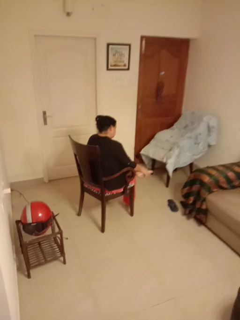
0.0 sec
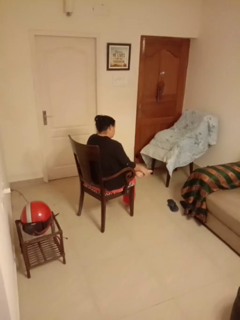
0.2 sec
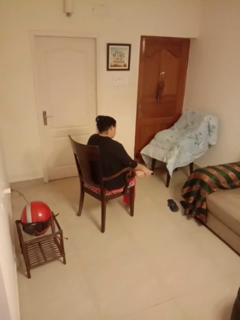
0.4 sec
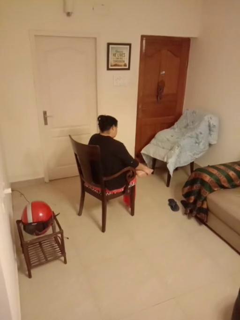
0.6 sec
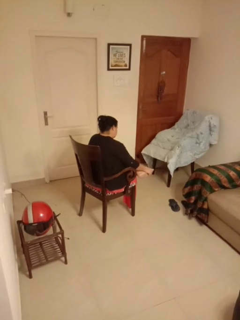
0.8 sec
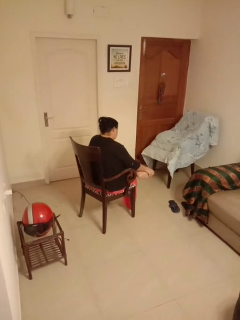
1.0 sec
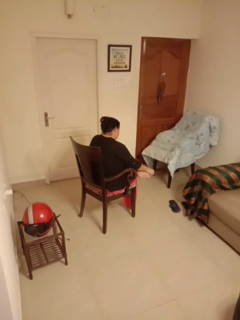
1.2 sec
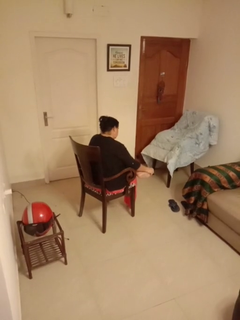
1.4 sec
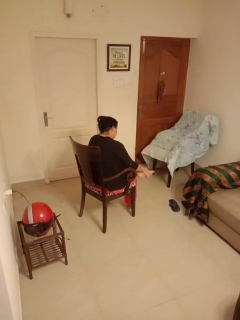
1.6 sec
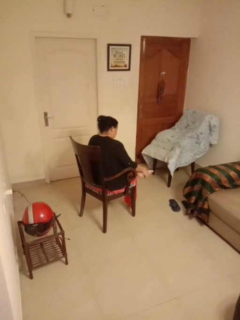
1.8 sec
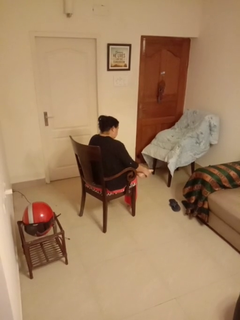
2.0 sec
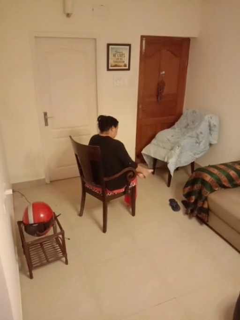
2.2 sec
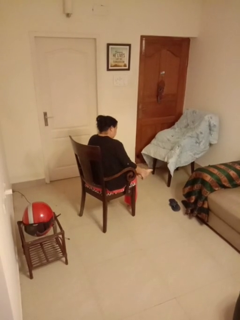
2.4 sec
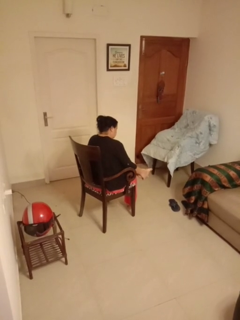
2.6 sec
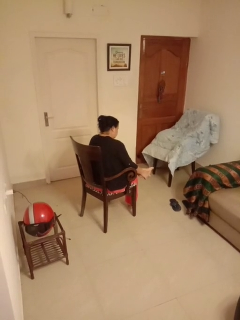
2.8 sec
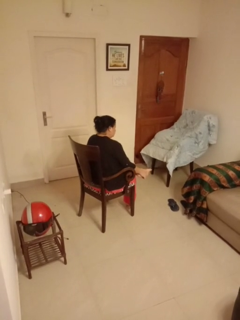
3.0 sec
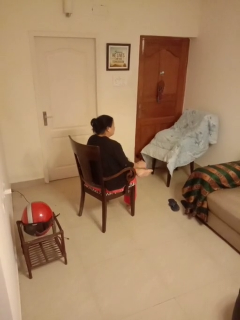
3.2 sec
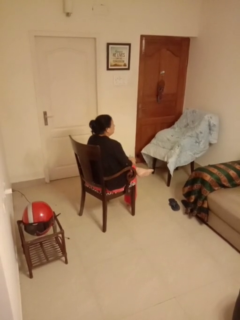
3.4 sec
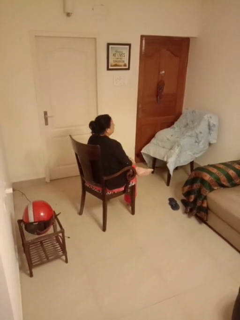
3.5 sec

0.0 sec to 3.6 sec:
person rubs foot

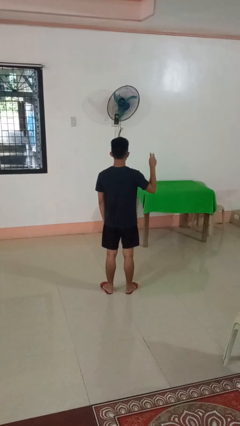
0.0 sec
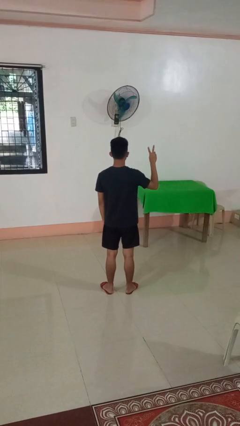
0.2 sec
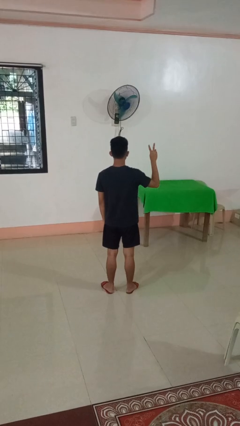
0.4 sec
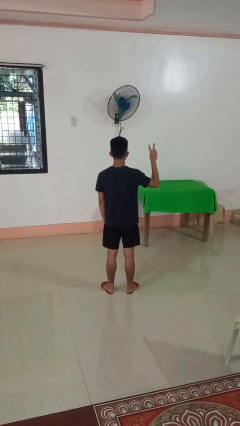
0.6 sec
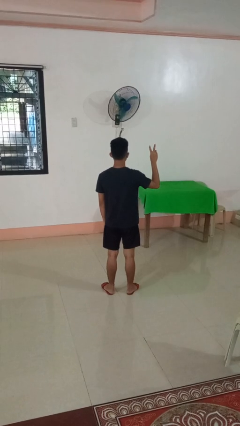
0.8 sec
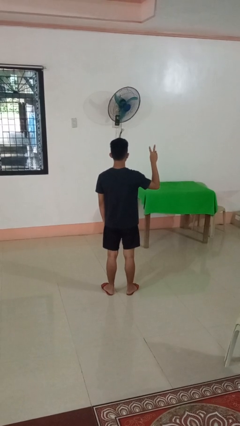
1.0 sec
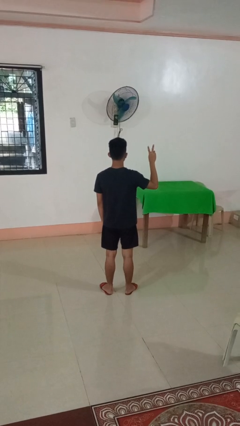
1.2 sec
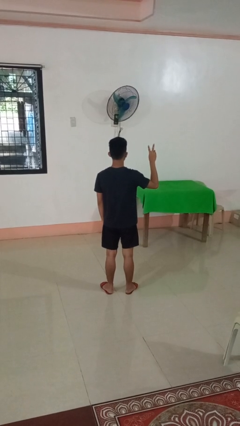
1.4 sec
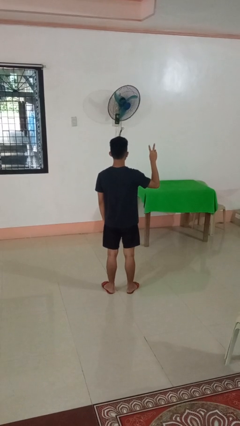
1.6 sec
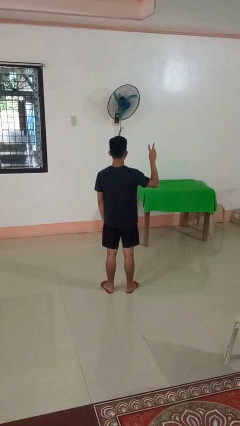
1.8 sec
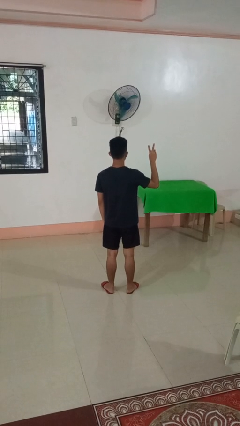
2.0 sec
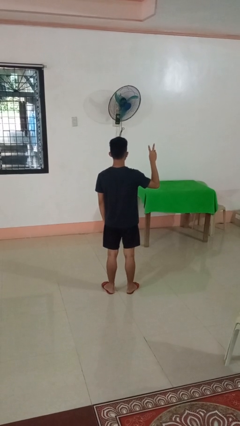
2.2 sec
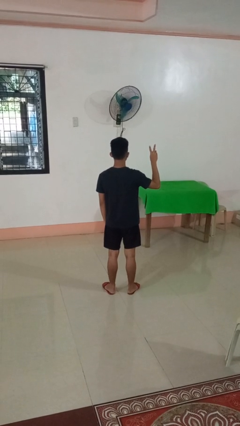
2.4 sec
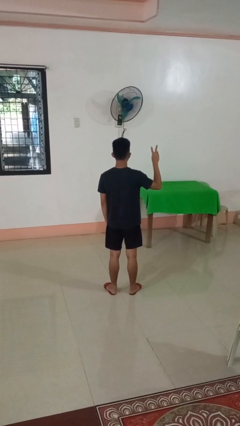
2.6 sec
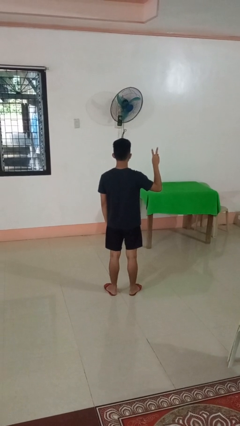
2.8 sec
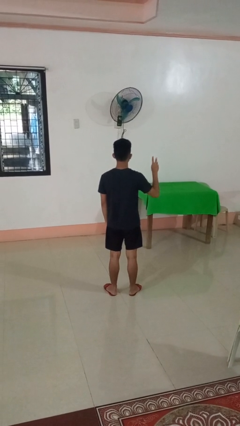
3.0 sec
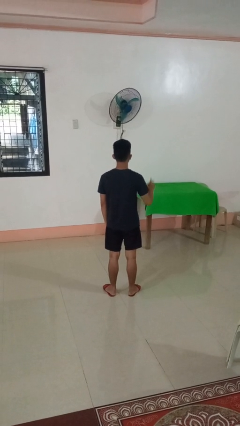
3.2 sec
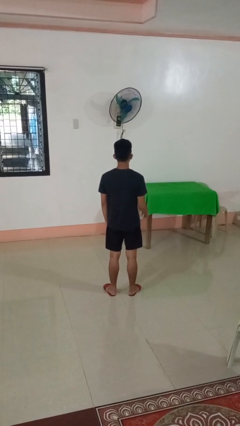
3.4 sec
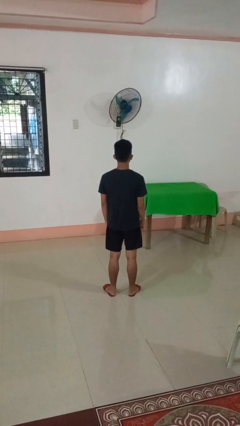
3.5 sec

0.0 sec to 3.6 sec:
person gestures peace

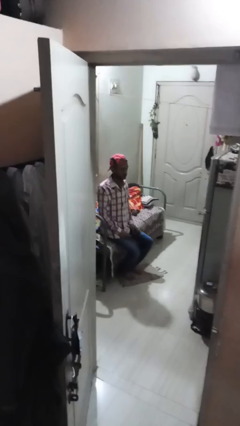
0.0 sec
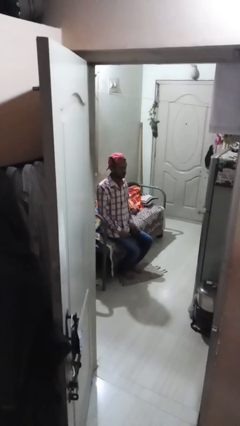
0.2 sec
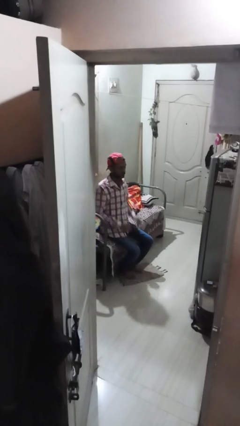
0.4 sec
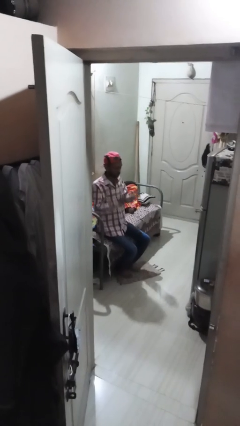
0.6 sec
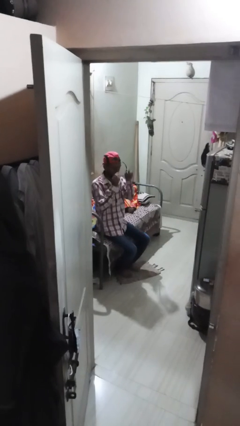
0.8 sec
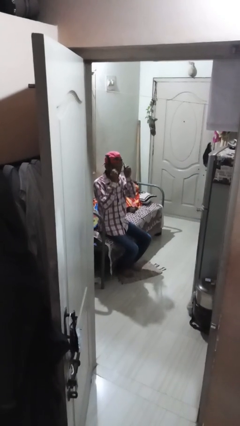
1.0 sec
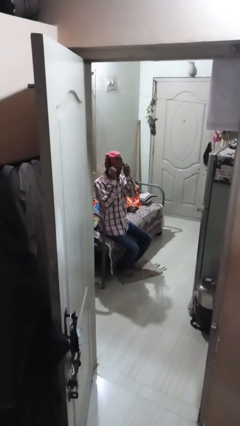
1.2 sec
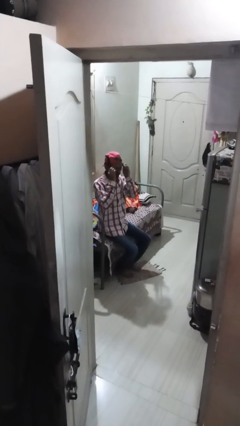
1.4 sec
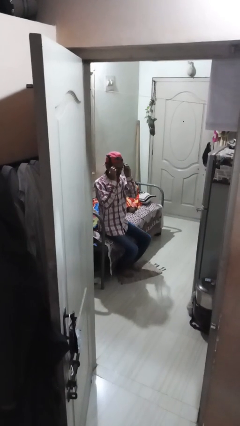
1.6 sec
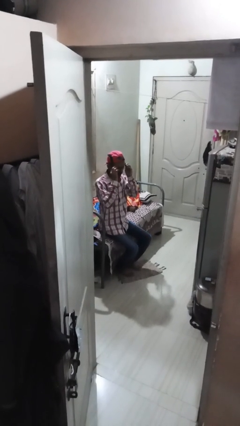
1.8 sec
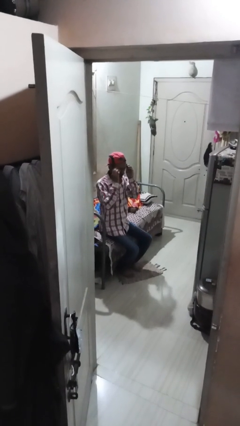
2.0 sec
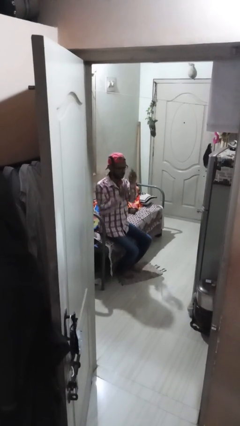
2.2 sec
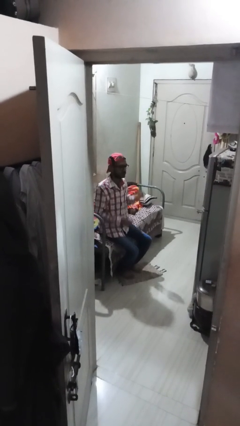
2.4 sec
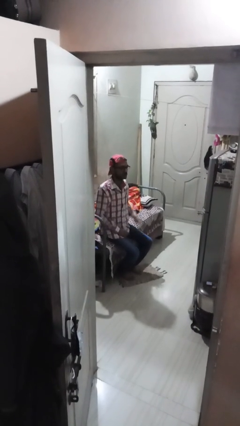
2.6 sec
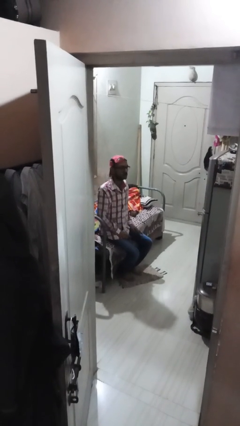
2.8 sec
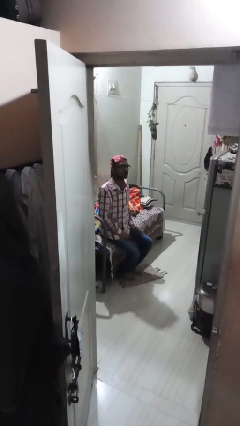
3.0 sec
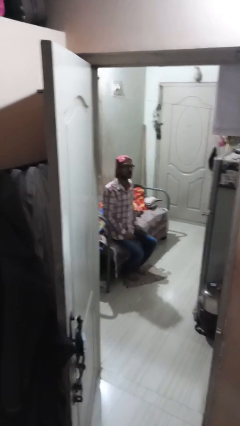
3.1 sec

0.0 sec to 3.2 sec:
person puts on glasses

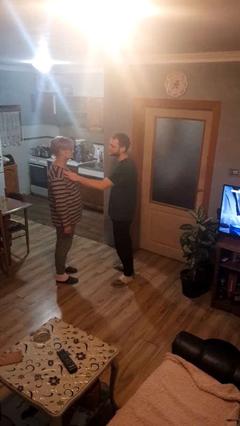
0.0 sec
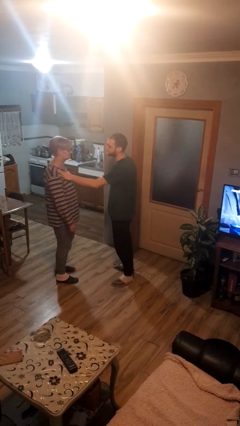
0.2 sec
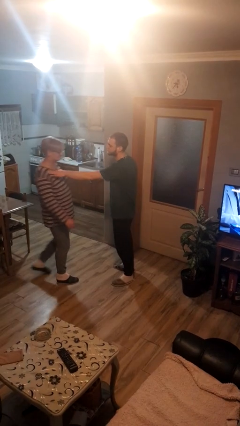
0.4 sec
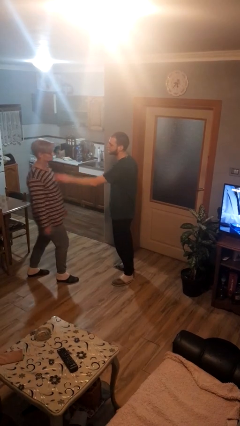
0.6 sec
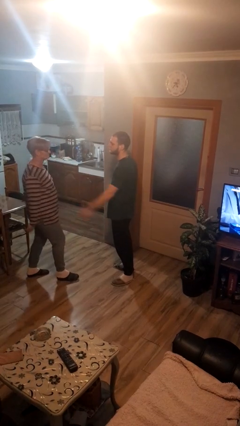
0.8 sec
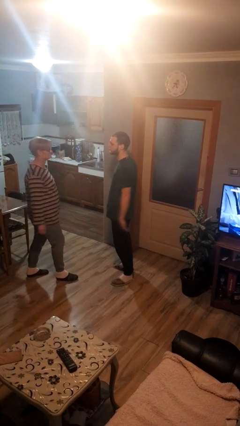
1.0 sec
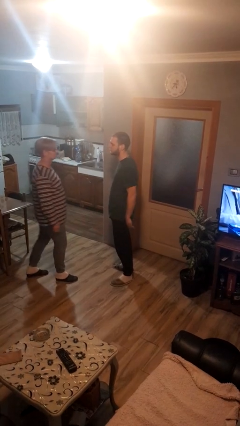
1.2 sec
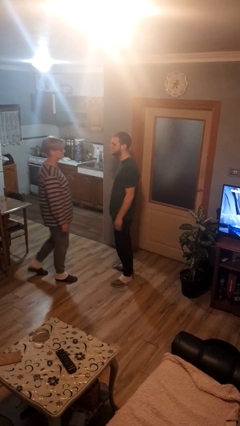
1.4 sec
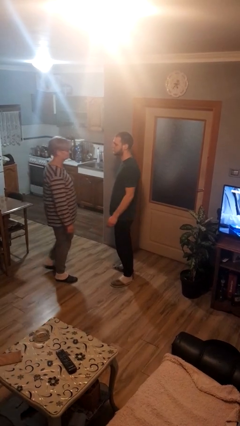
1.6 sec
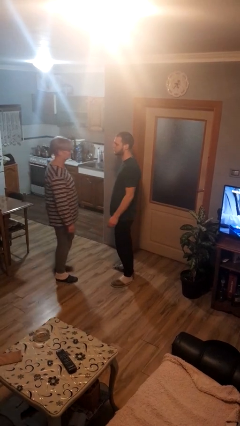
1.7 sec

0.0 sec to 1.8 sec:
person shoves person

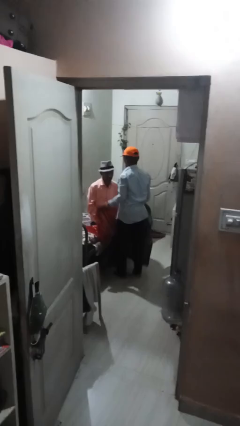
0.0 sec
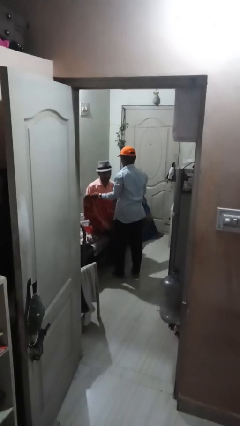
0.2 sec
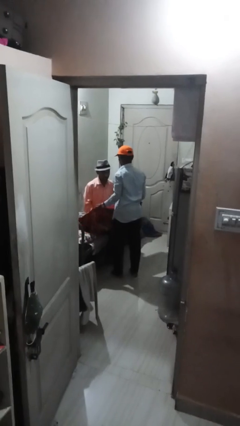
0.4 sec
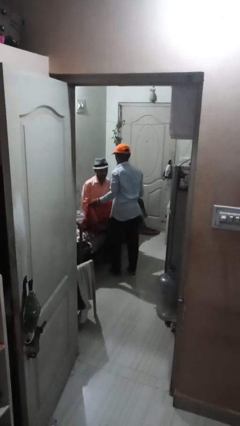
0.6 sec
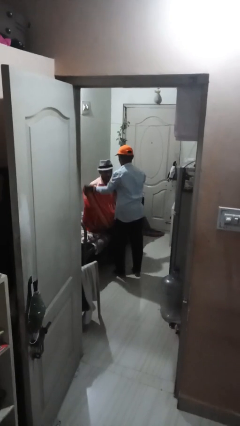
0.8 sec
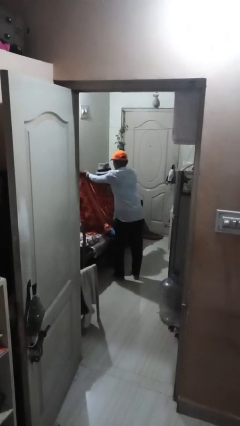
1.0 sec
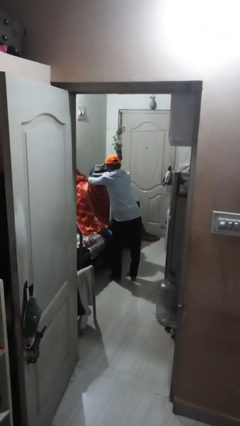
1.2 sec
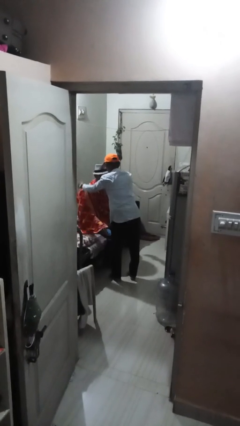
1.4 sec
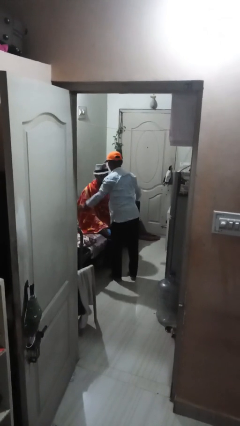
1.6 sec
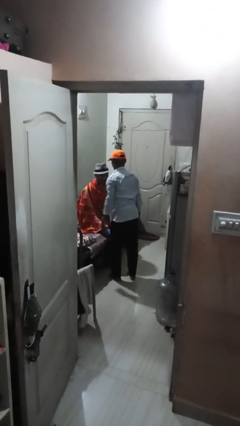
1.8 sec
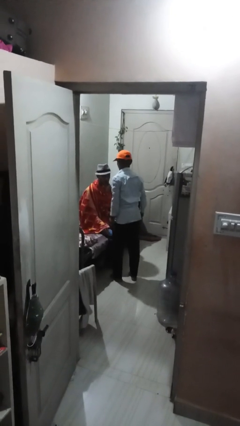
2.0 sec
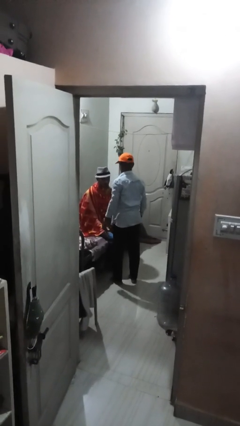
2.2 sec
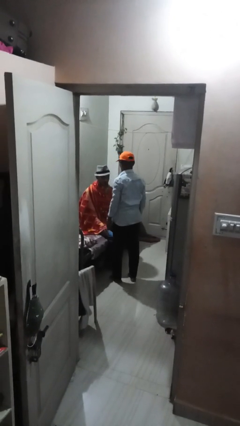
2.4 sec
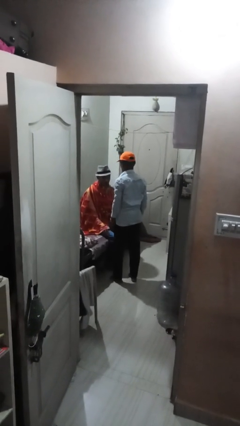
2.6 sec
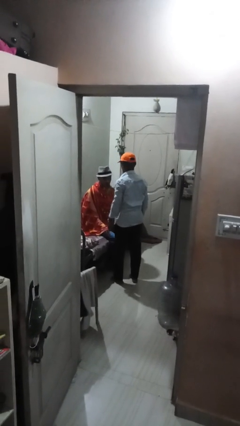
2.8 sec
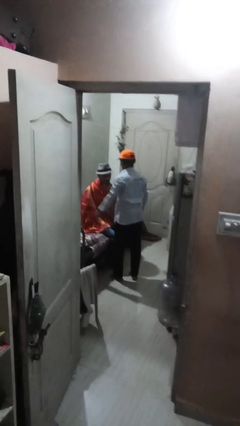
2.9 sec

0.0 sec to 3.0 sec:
person covers friend with blanket

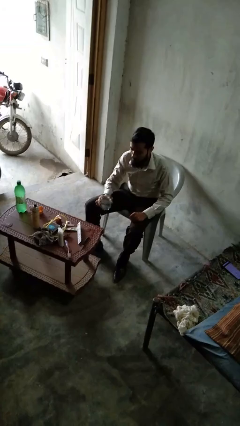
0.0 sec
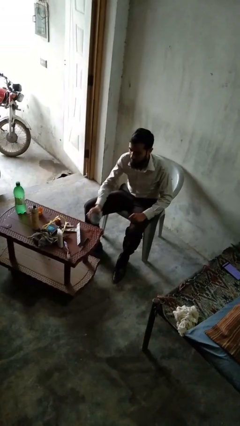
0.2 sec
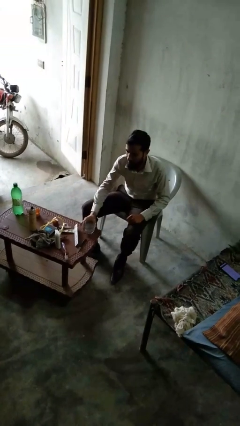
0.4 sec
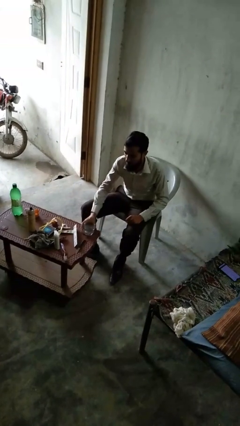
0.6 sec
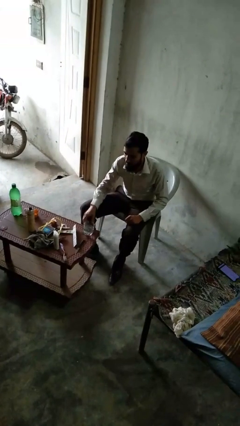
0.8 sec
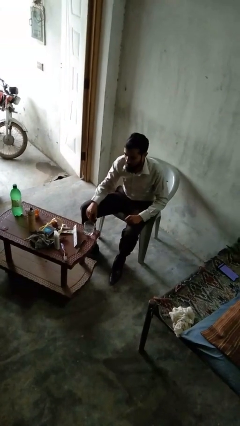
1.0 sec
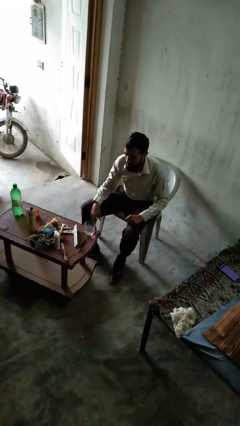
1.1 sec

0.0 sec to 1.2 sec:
person puts down object on table

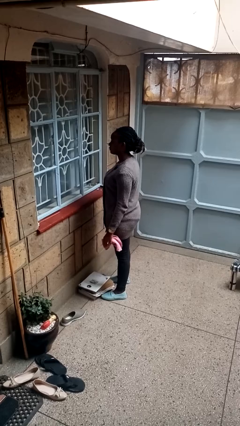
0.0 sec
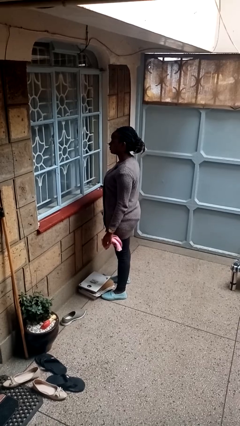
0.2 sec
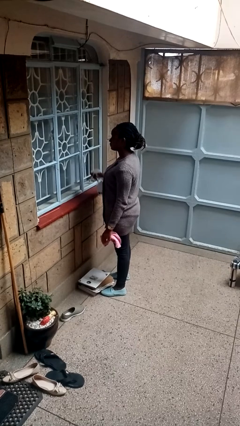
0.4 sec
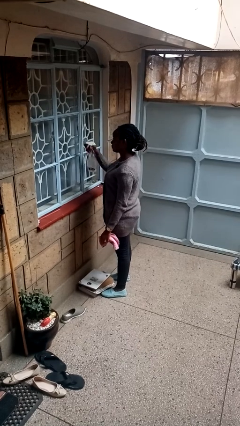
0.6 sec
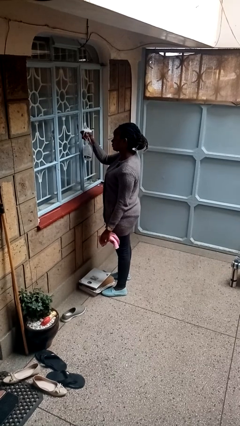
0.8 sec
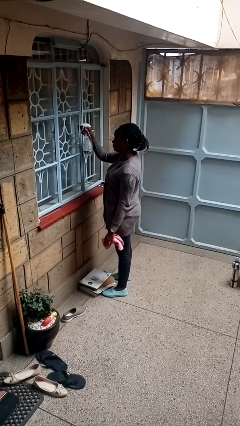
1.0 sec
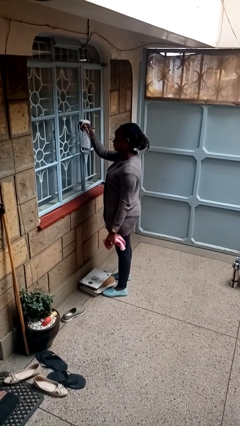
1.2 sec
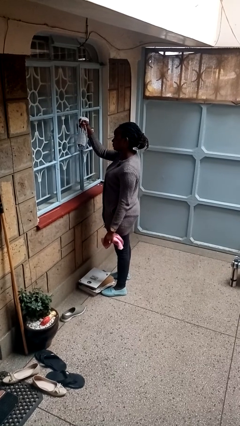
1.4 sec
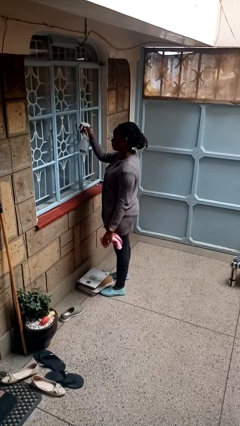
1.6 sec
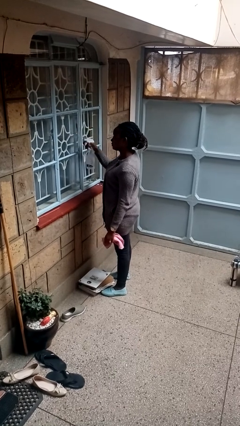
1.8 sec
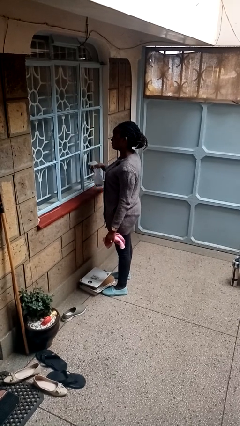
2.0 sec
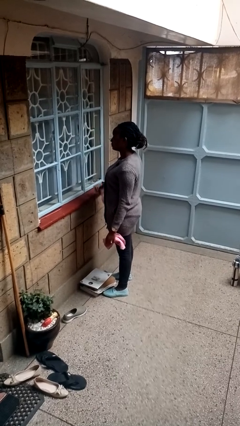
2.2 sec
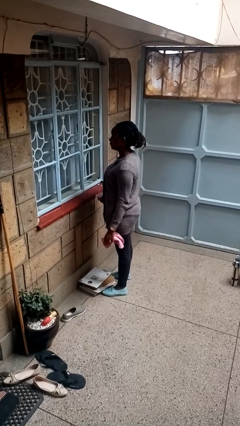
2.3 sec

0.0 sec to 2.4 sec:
person sprays from bottle
